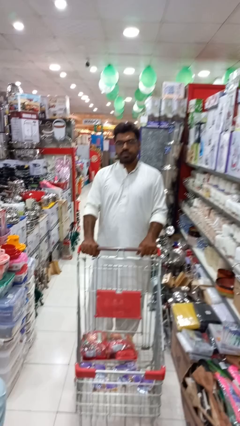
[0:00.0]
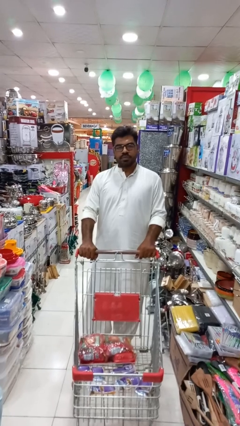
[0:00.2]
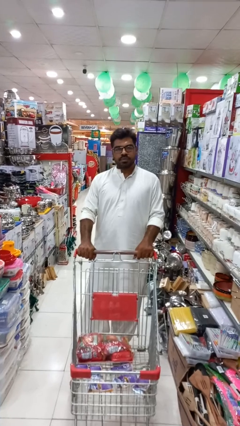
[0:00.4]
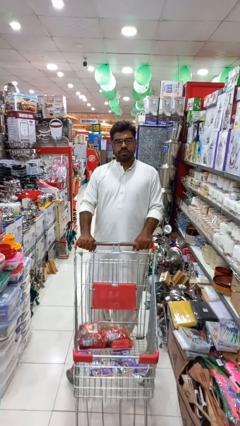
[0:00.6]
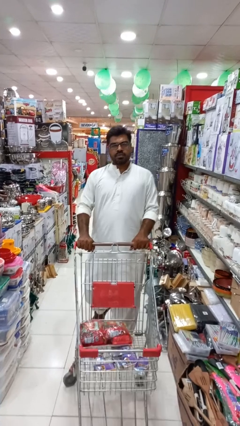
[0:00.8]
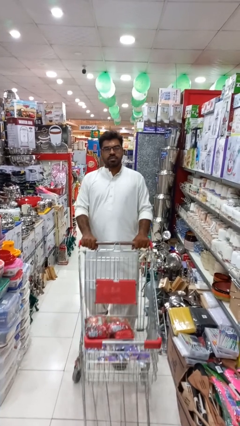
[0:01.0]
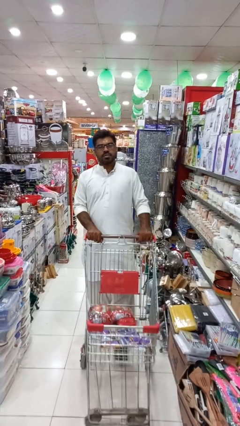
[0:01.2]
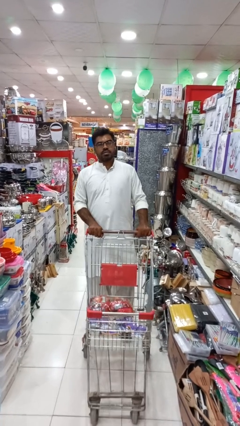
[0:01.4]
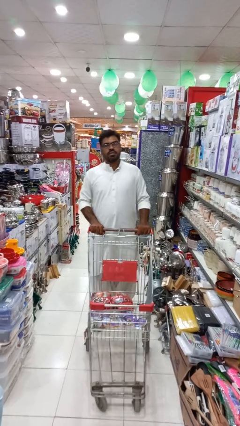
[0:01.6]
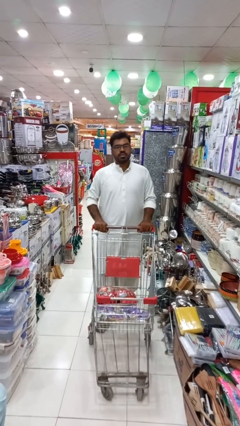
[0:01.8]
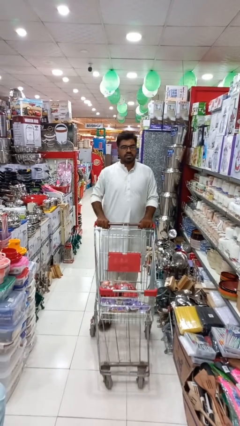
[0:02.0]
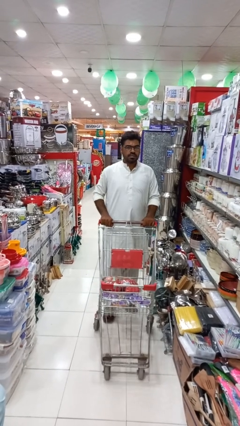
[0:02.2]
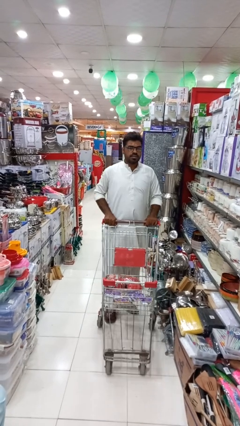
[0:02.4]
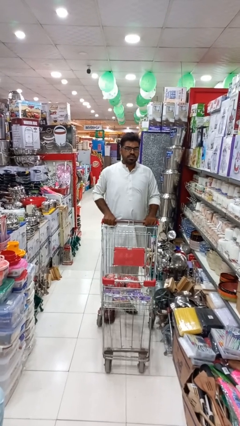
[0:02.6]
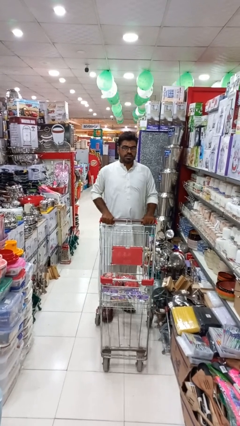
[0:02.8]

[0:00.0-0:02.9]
person pulls wheeled cart

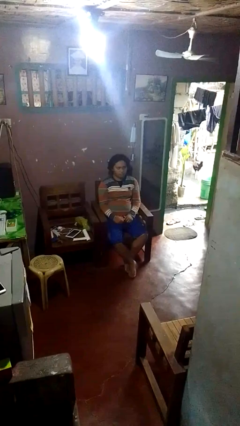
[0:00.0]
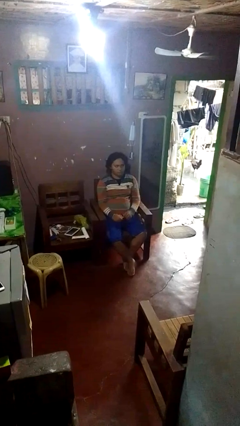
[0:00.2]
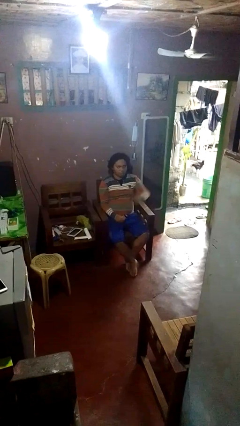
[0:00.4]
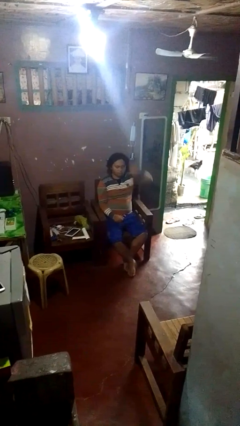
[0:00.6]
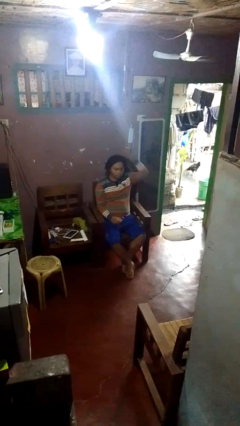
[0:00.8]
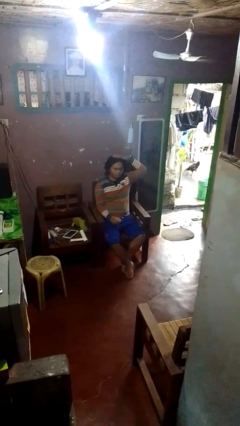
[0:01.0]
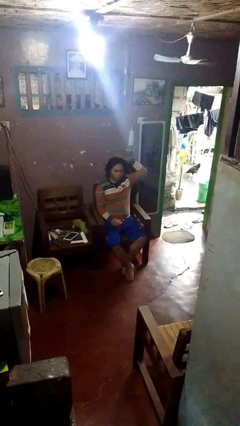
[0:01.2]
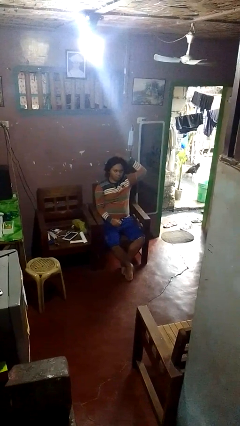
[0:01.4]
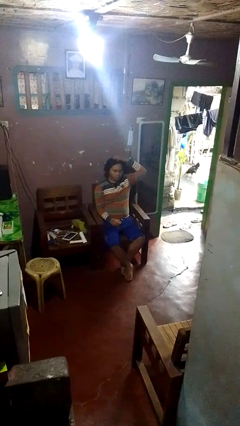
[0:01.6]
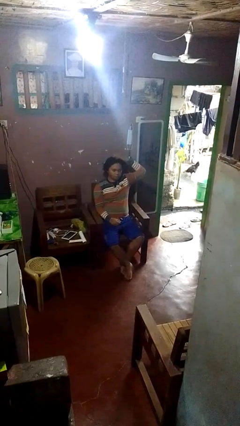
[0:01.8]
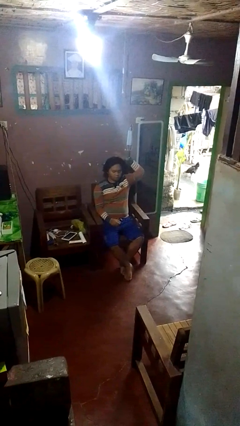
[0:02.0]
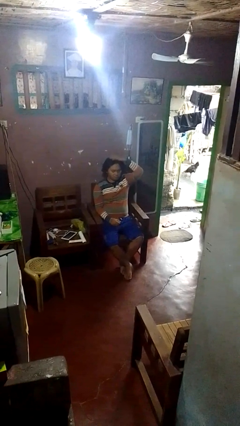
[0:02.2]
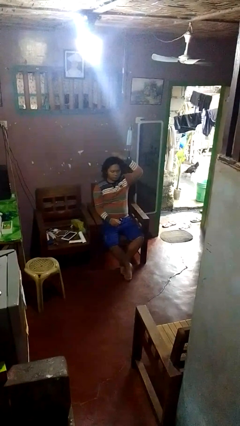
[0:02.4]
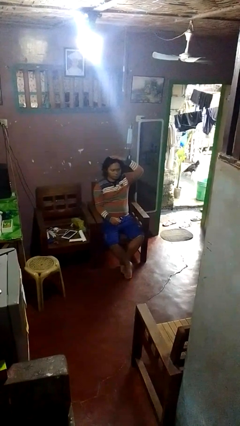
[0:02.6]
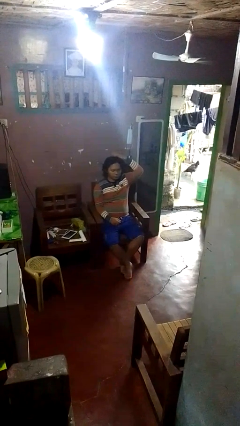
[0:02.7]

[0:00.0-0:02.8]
person pats head

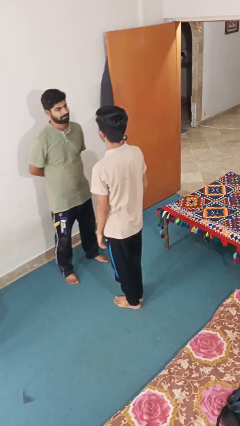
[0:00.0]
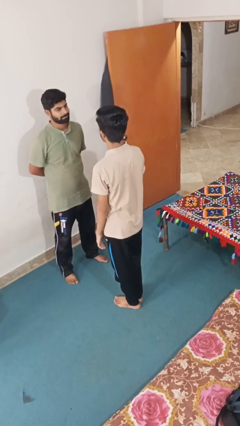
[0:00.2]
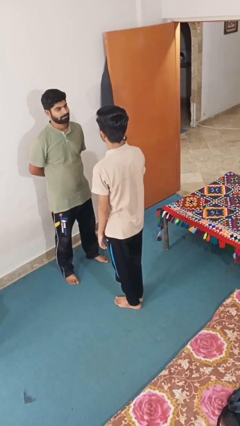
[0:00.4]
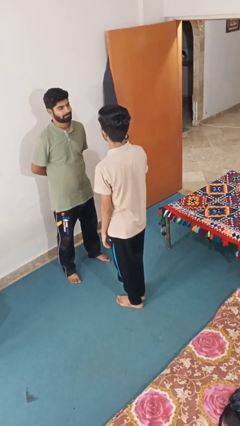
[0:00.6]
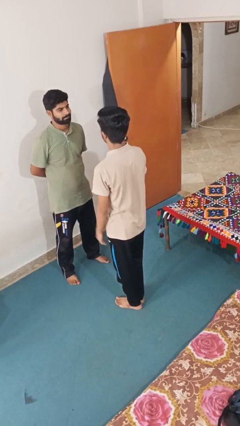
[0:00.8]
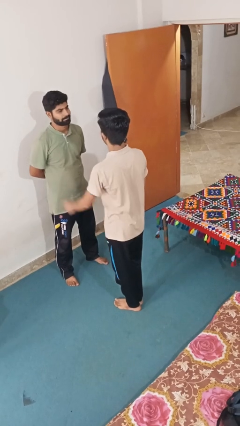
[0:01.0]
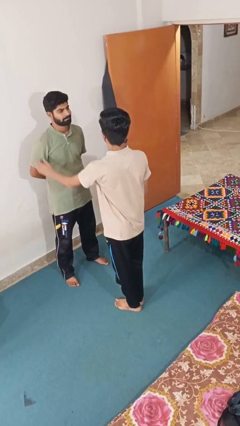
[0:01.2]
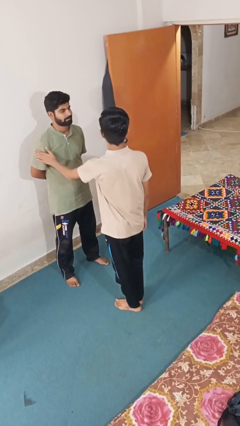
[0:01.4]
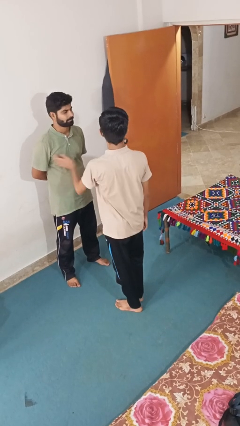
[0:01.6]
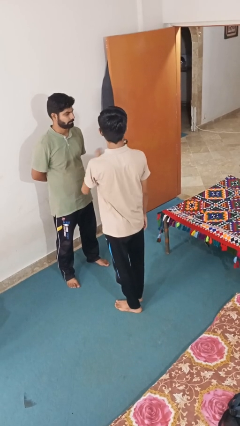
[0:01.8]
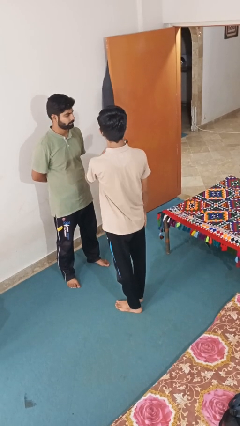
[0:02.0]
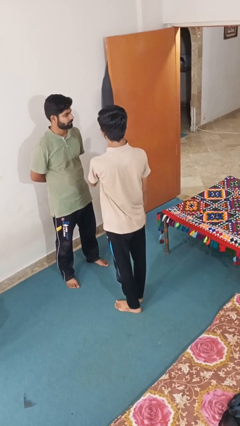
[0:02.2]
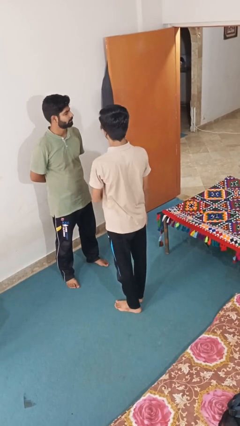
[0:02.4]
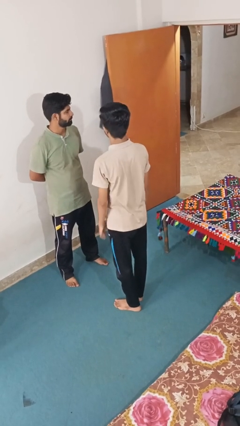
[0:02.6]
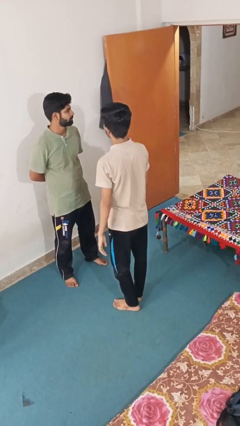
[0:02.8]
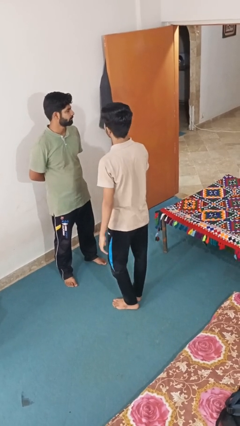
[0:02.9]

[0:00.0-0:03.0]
person shoves person

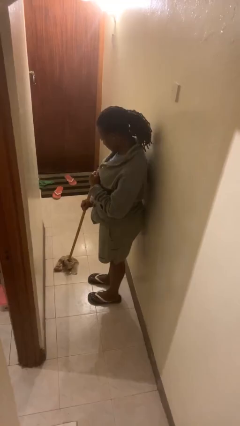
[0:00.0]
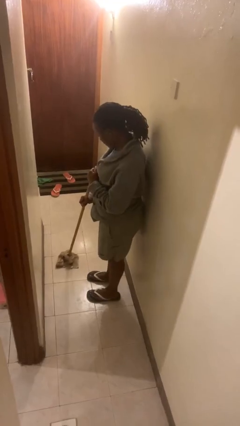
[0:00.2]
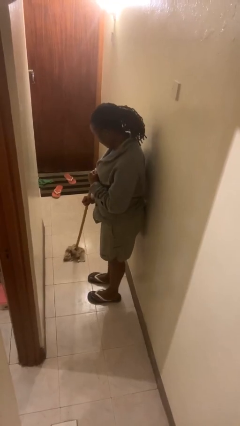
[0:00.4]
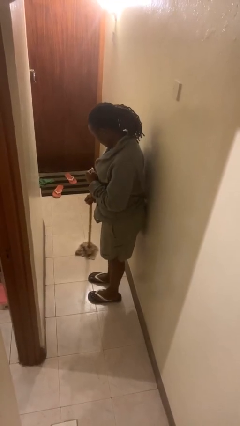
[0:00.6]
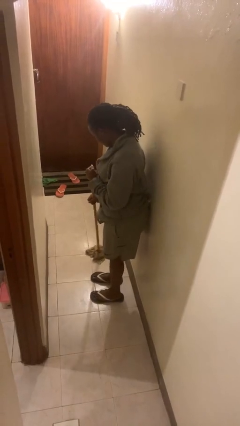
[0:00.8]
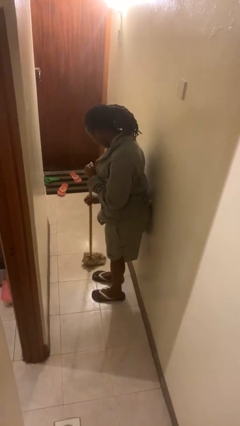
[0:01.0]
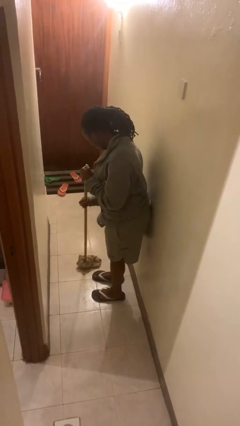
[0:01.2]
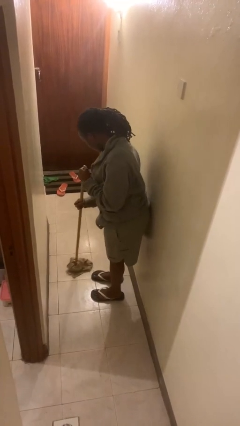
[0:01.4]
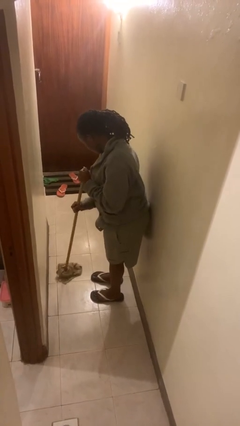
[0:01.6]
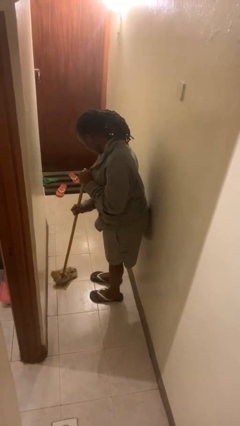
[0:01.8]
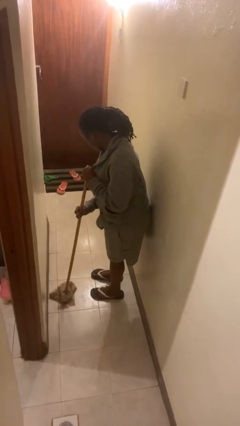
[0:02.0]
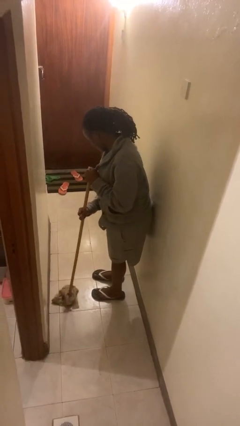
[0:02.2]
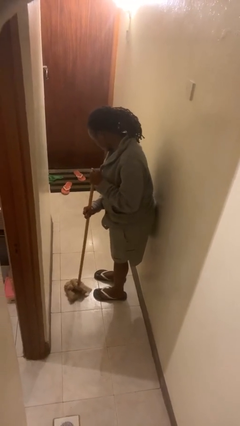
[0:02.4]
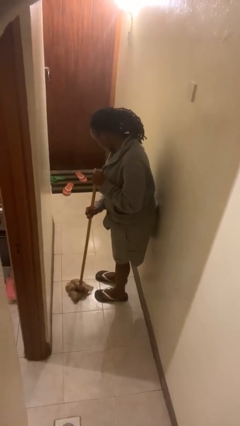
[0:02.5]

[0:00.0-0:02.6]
person mops

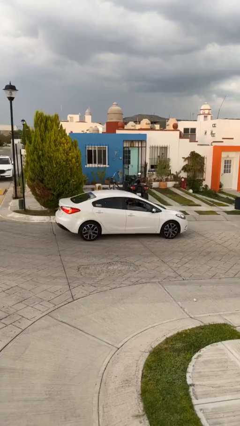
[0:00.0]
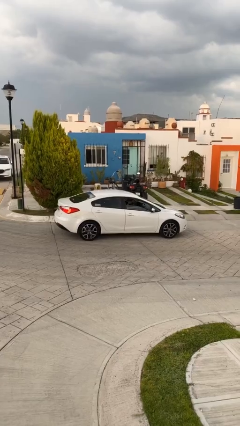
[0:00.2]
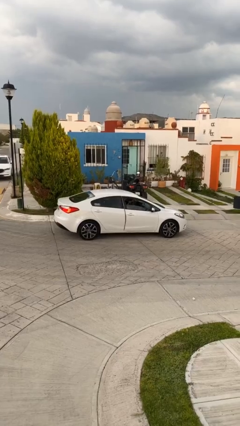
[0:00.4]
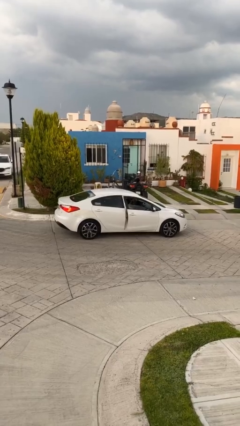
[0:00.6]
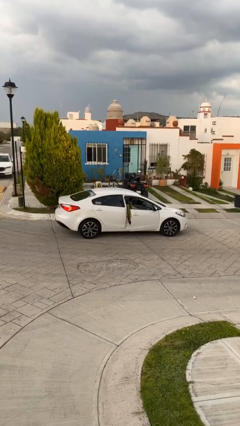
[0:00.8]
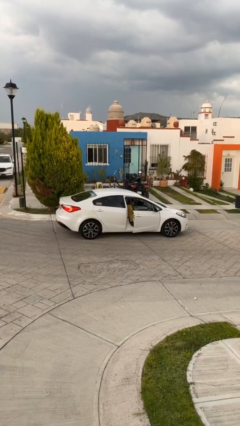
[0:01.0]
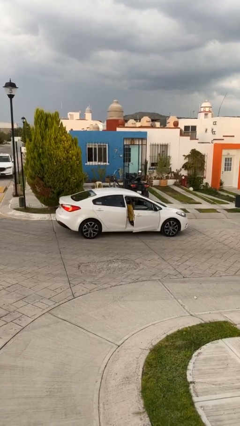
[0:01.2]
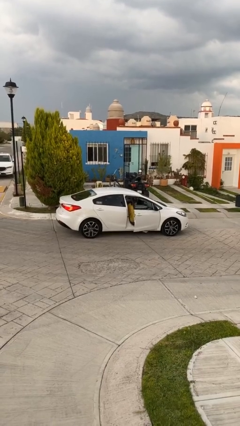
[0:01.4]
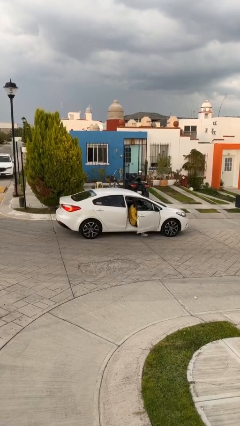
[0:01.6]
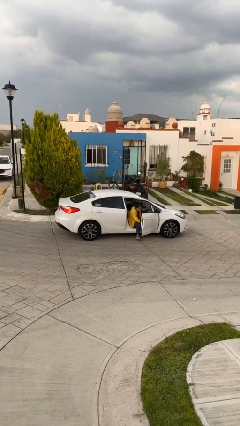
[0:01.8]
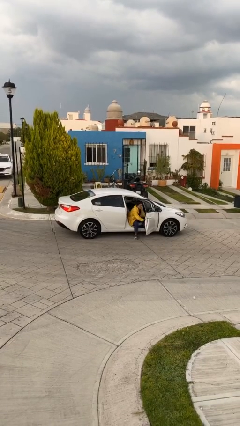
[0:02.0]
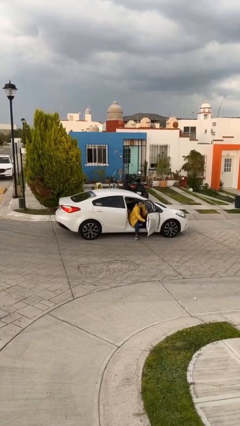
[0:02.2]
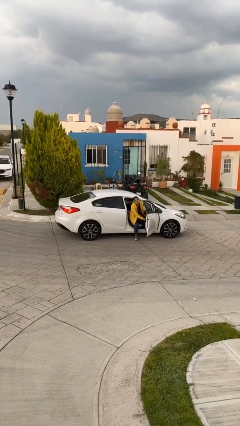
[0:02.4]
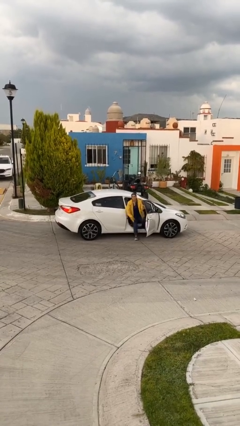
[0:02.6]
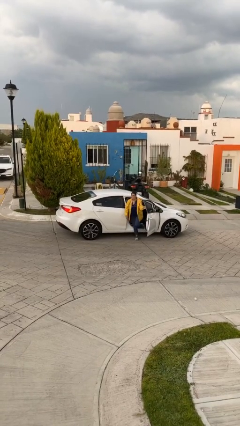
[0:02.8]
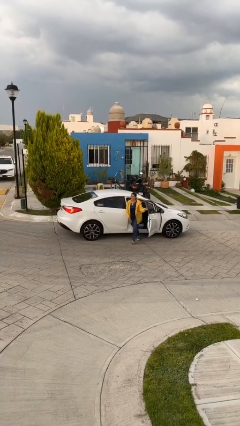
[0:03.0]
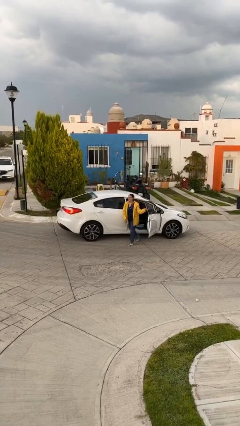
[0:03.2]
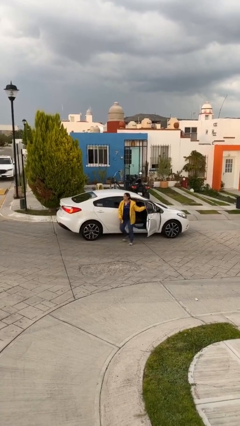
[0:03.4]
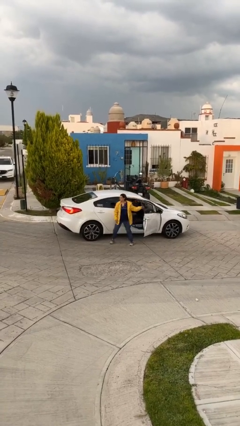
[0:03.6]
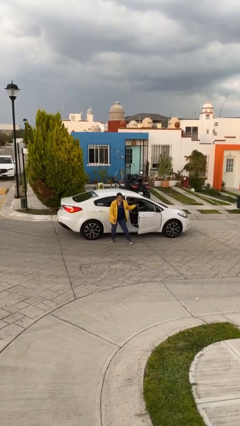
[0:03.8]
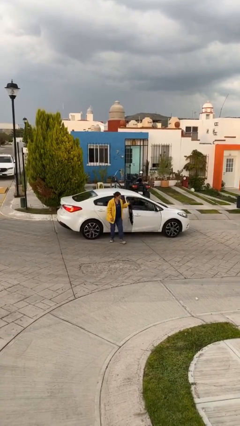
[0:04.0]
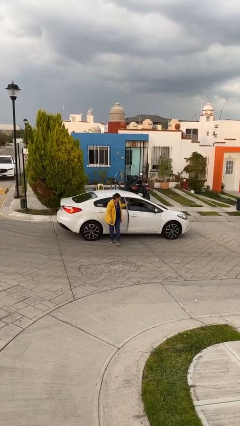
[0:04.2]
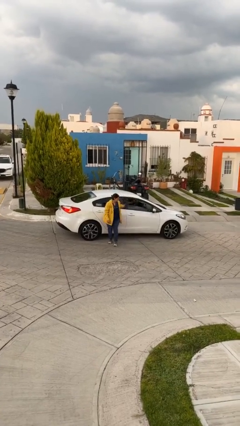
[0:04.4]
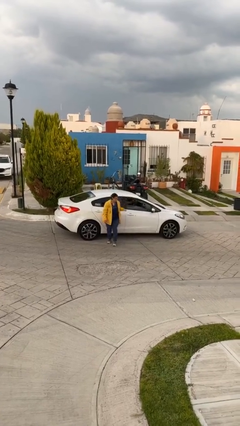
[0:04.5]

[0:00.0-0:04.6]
car drops off person

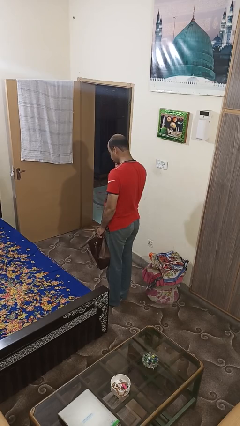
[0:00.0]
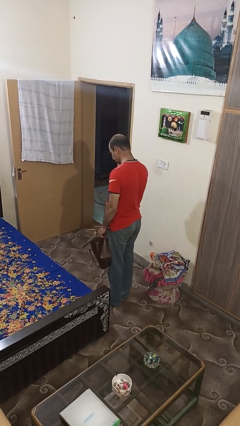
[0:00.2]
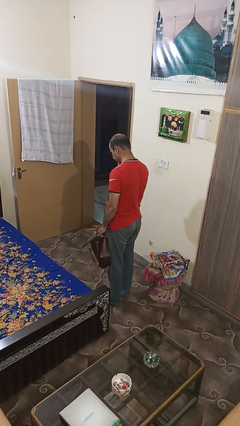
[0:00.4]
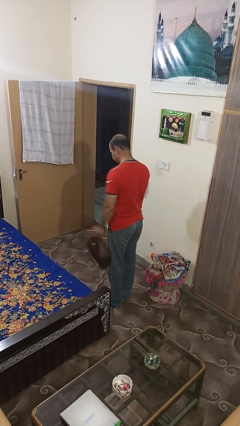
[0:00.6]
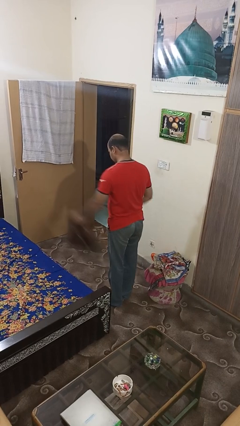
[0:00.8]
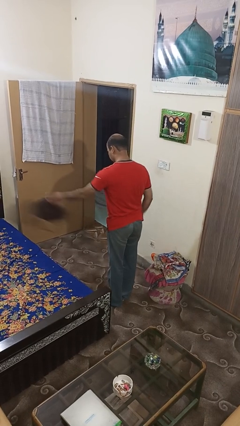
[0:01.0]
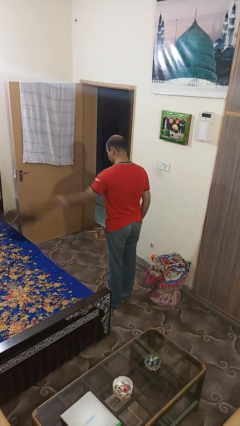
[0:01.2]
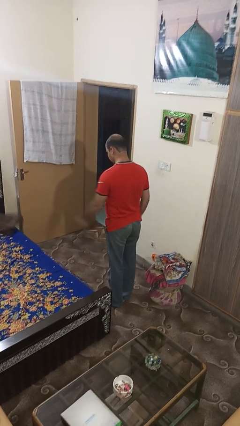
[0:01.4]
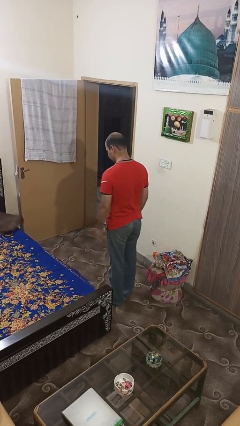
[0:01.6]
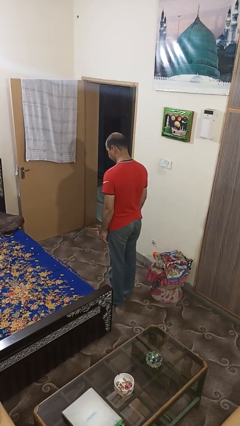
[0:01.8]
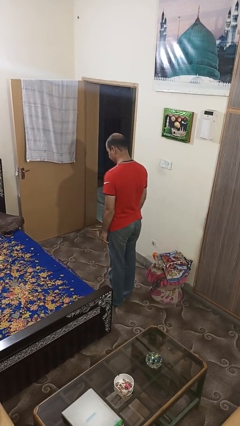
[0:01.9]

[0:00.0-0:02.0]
person throws object on bed
